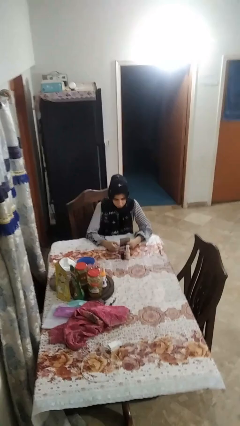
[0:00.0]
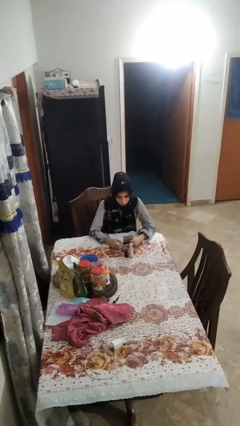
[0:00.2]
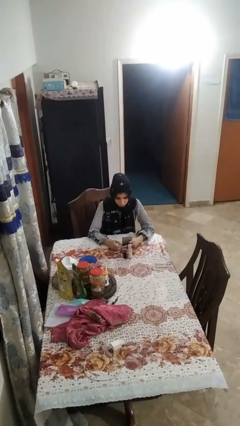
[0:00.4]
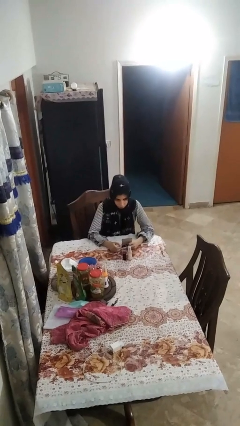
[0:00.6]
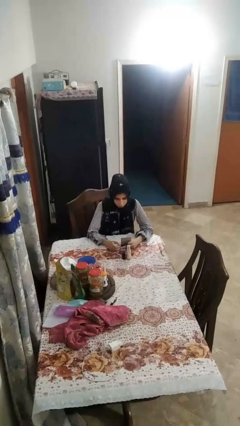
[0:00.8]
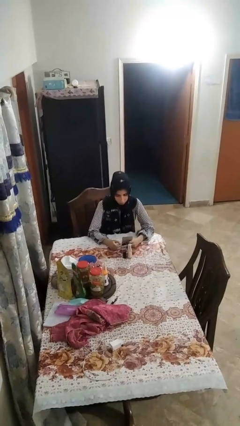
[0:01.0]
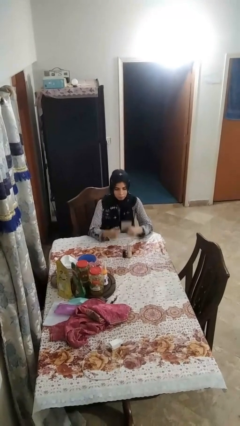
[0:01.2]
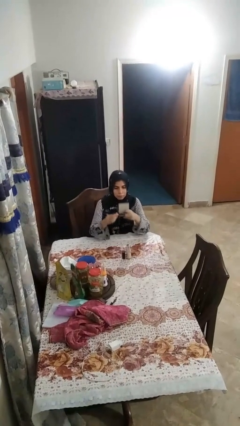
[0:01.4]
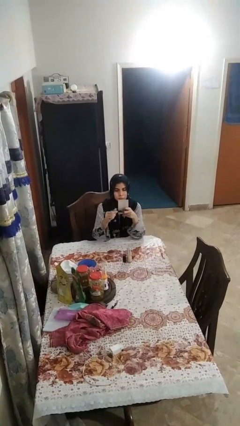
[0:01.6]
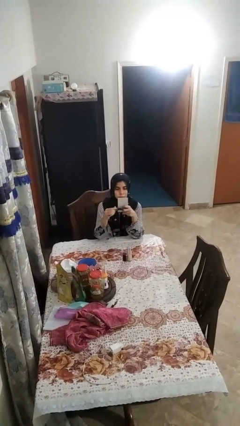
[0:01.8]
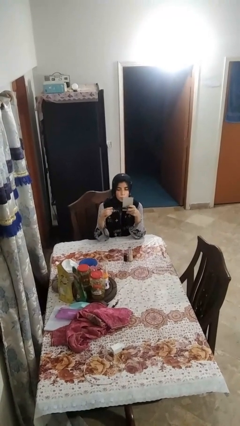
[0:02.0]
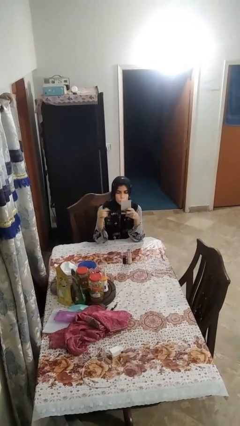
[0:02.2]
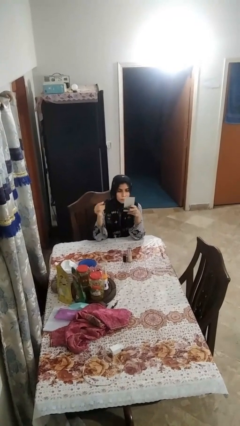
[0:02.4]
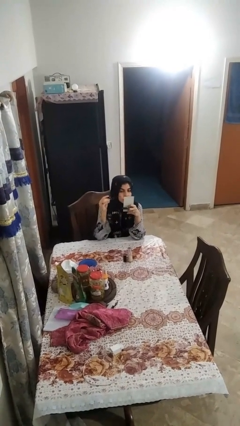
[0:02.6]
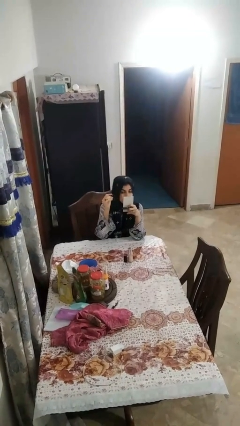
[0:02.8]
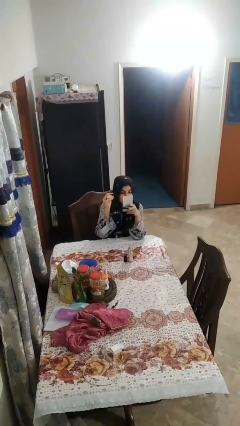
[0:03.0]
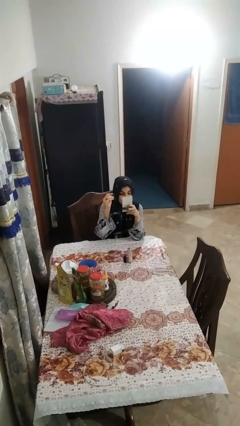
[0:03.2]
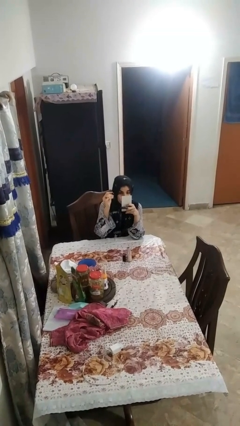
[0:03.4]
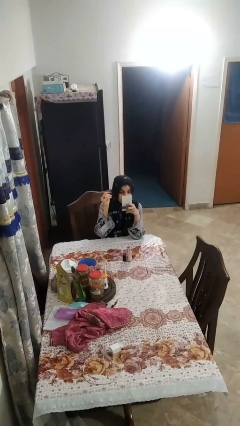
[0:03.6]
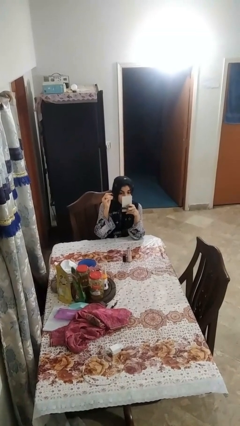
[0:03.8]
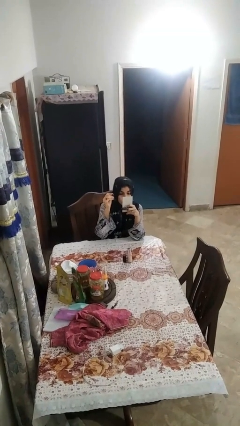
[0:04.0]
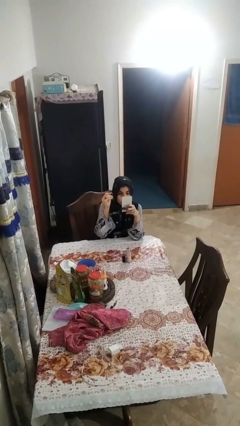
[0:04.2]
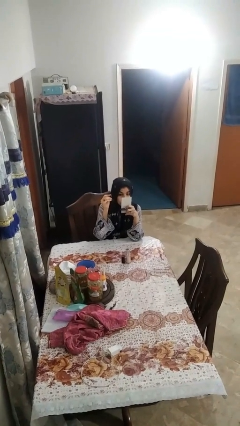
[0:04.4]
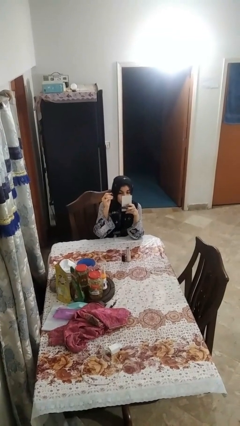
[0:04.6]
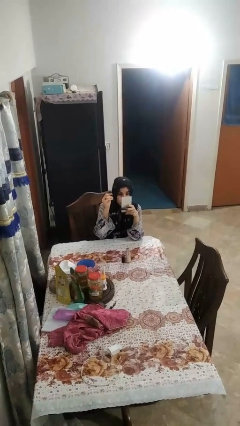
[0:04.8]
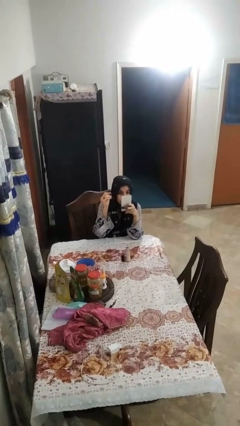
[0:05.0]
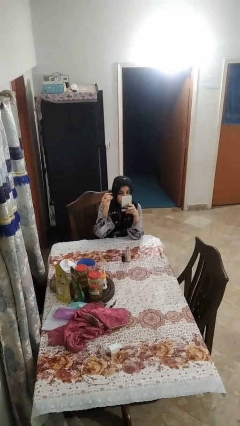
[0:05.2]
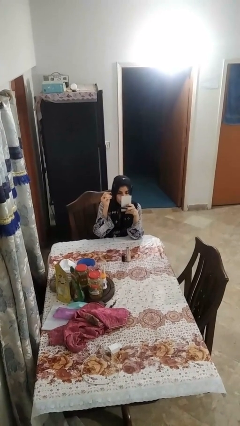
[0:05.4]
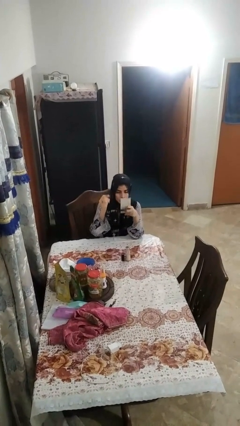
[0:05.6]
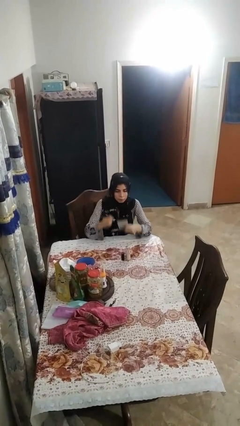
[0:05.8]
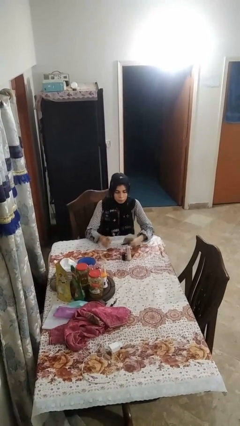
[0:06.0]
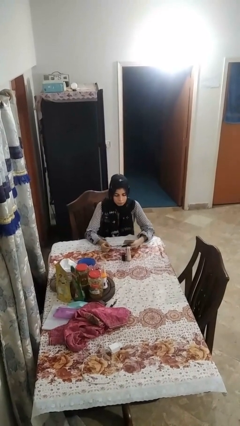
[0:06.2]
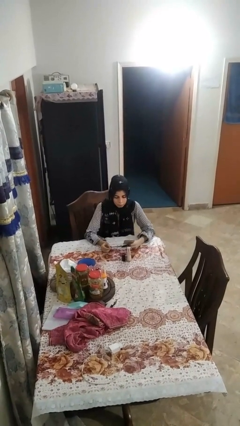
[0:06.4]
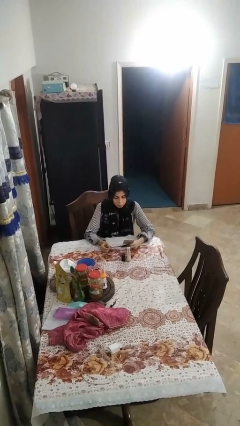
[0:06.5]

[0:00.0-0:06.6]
person applies eye makeup

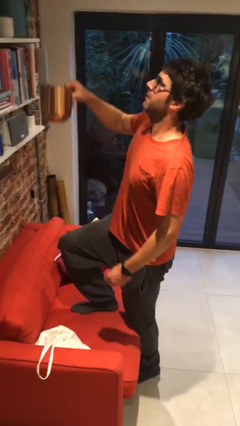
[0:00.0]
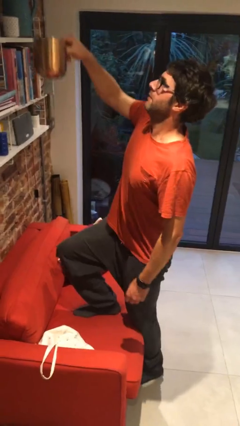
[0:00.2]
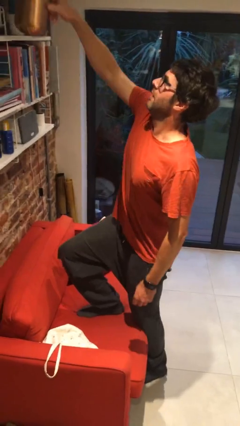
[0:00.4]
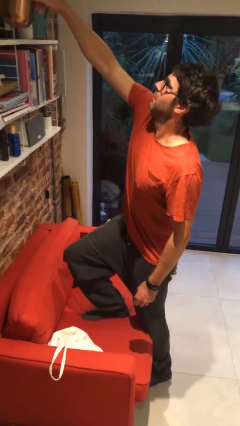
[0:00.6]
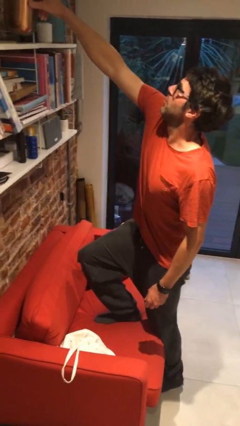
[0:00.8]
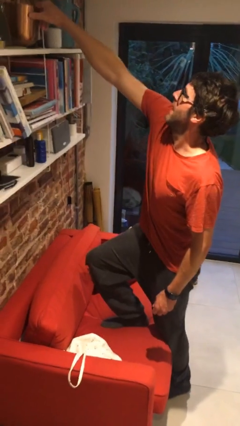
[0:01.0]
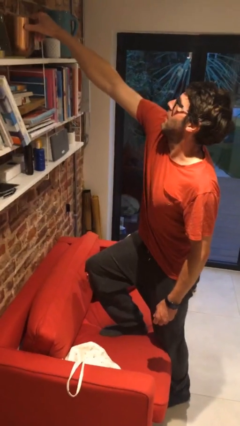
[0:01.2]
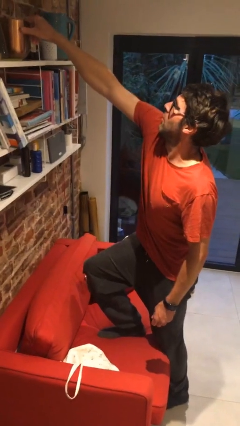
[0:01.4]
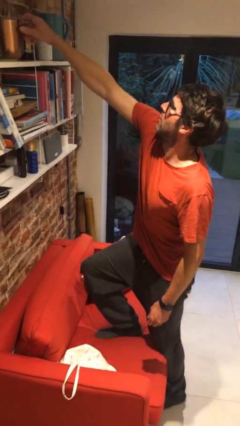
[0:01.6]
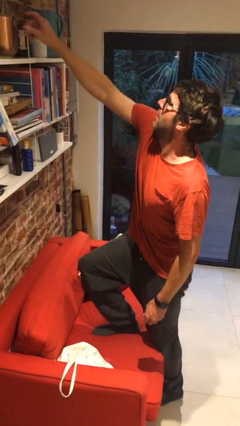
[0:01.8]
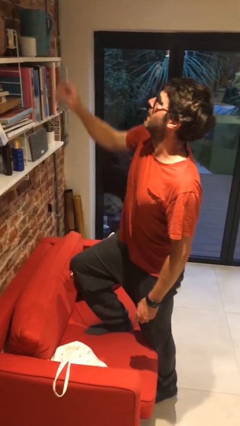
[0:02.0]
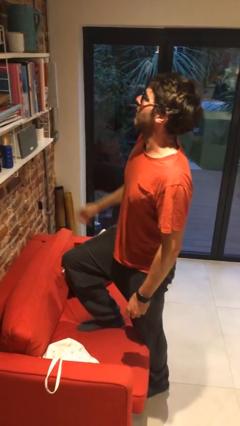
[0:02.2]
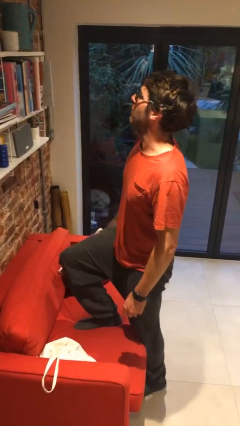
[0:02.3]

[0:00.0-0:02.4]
person puts down object on shelf

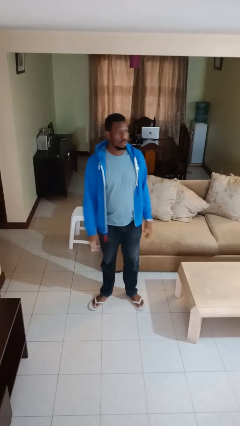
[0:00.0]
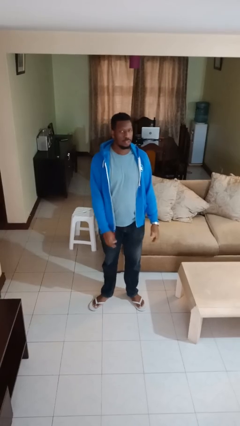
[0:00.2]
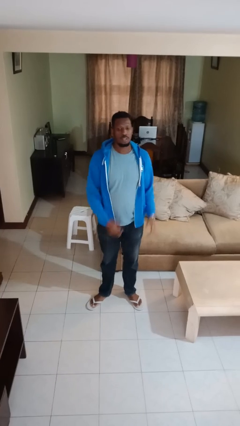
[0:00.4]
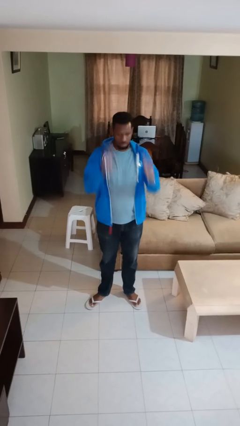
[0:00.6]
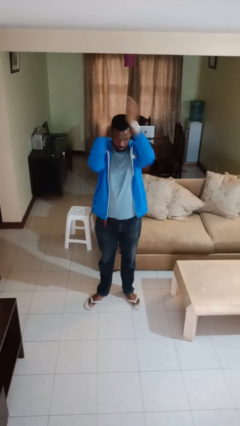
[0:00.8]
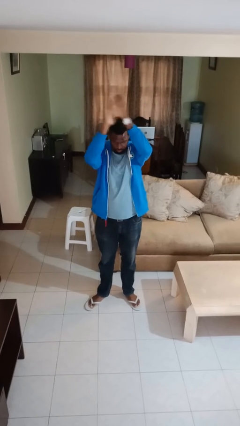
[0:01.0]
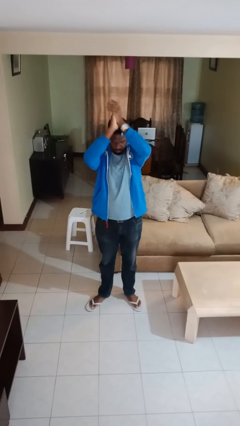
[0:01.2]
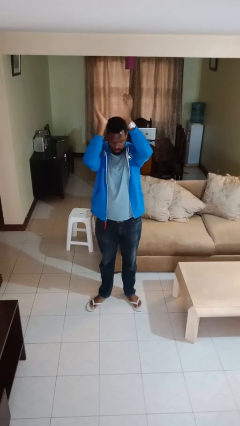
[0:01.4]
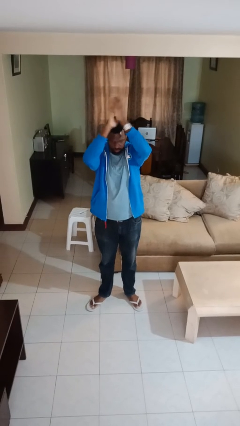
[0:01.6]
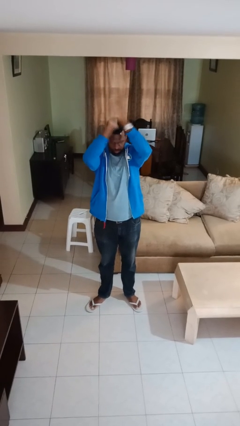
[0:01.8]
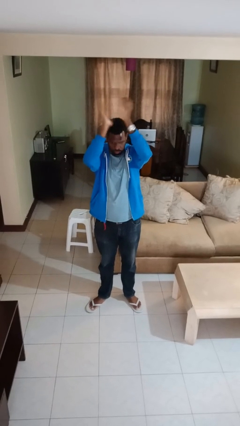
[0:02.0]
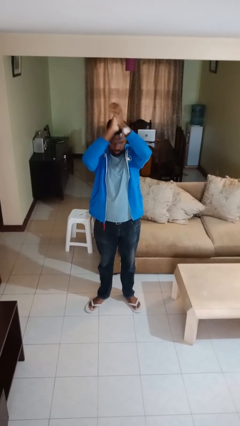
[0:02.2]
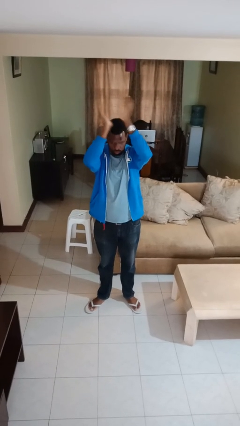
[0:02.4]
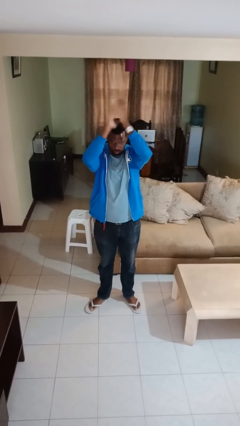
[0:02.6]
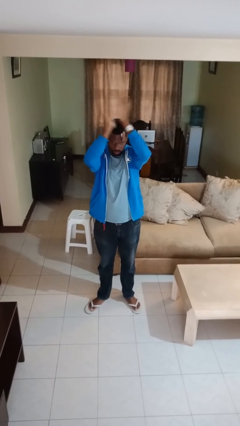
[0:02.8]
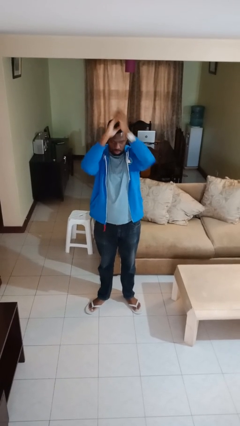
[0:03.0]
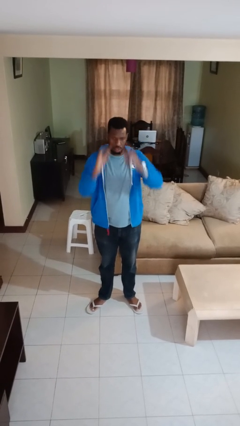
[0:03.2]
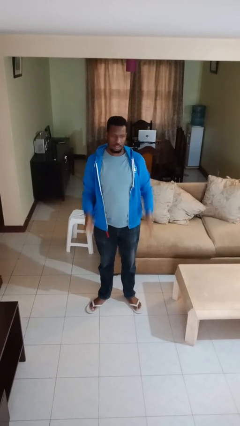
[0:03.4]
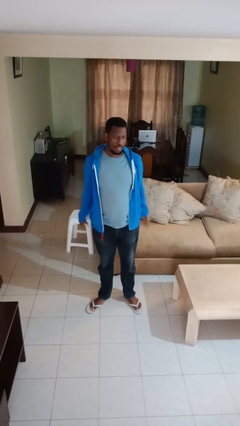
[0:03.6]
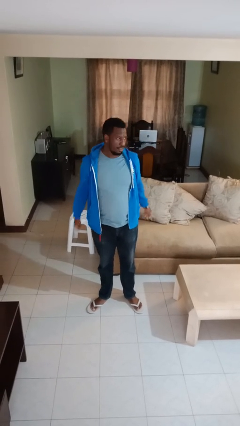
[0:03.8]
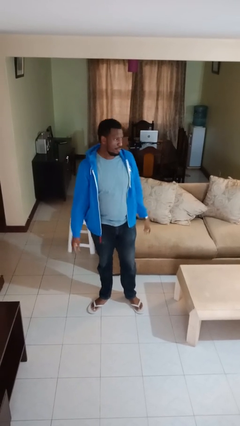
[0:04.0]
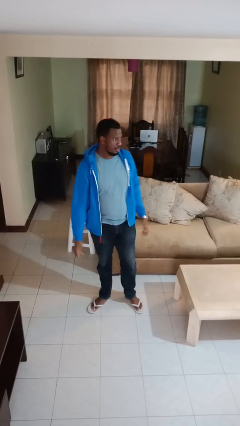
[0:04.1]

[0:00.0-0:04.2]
person claps hands

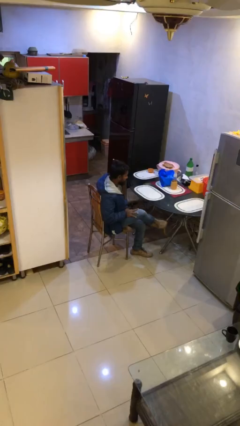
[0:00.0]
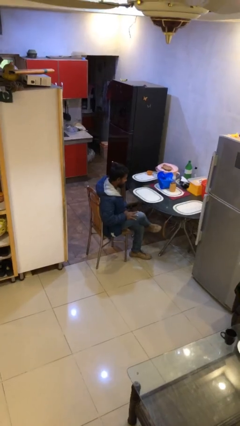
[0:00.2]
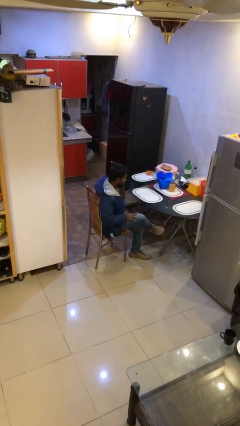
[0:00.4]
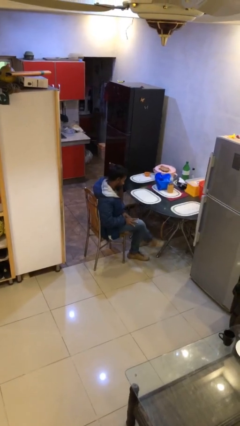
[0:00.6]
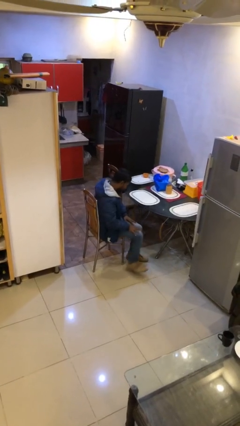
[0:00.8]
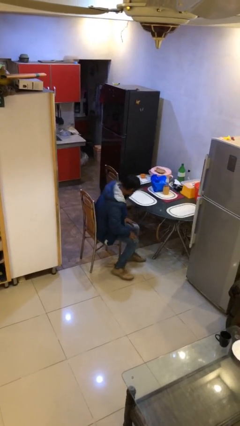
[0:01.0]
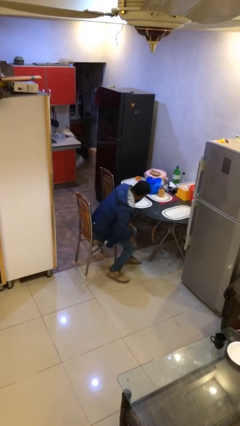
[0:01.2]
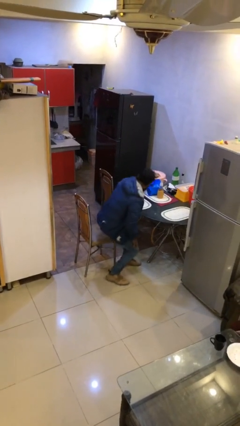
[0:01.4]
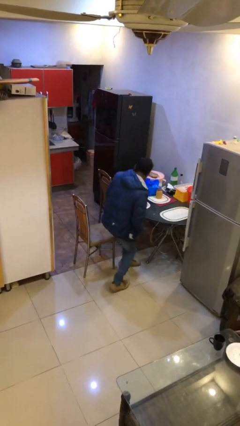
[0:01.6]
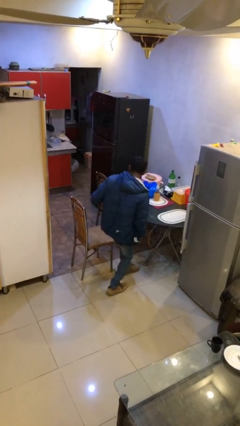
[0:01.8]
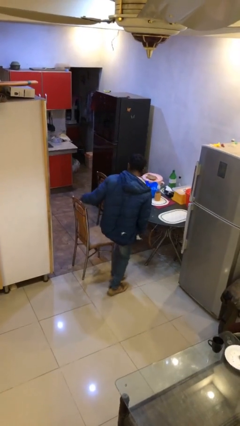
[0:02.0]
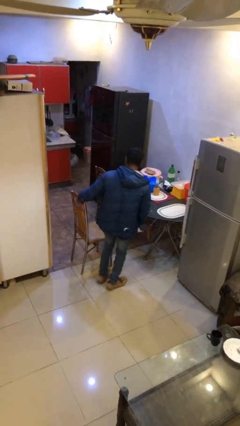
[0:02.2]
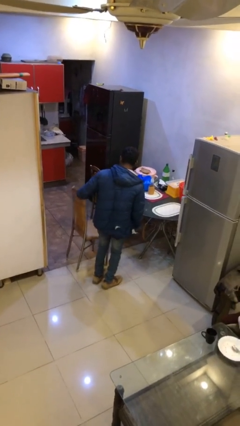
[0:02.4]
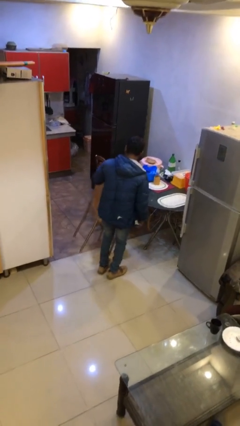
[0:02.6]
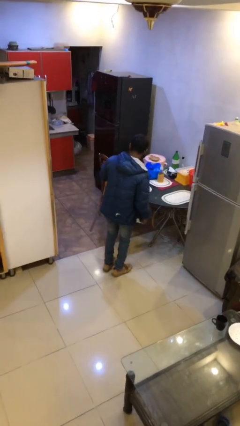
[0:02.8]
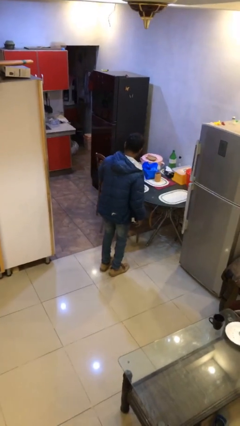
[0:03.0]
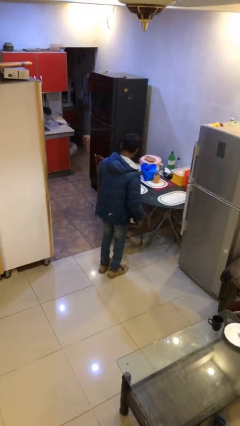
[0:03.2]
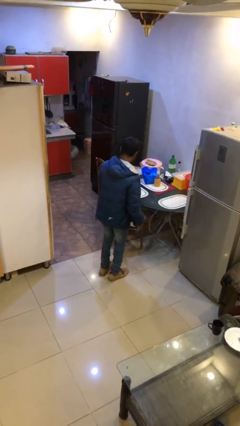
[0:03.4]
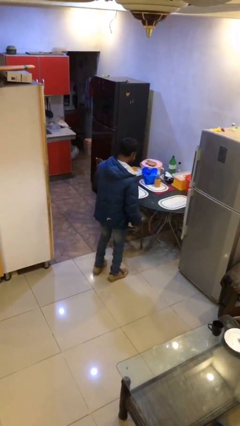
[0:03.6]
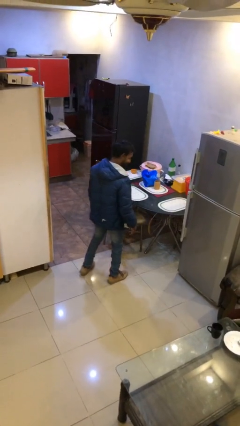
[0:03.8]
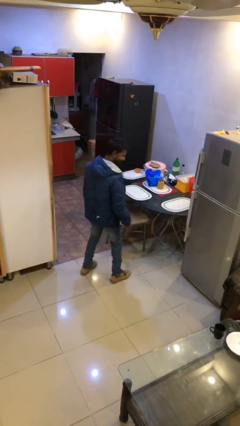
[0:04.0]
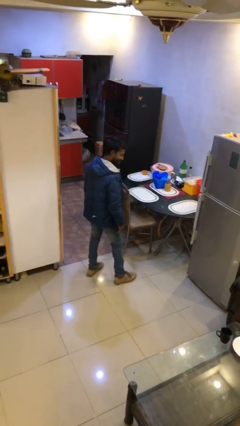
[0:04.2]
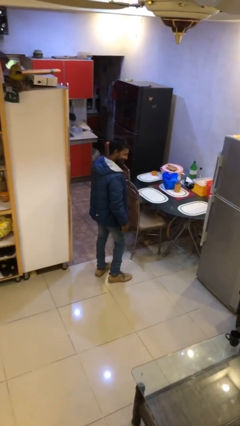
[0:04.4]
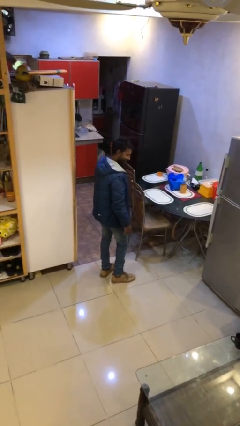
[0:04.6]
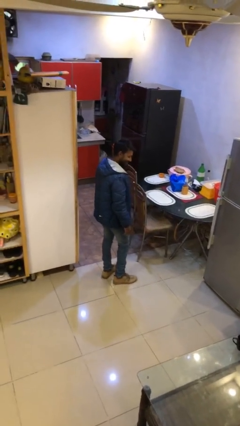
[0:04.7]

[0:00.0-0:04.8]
person stands up
